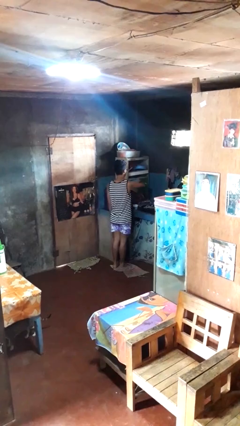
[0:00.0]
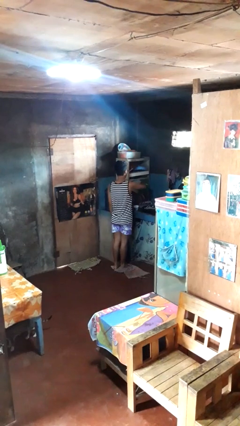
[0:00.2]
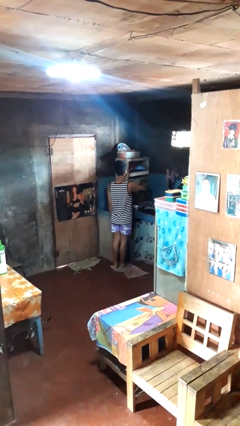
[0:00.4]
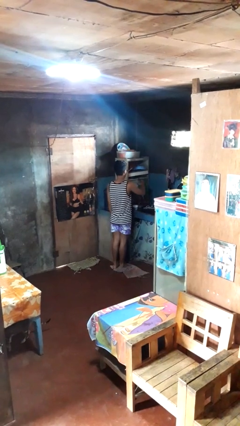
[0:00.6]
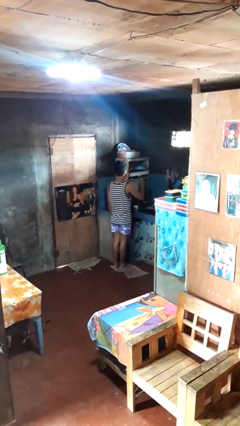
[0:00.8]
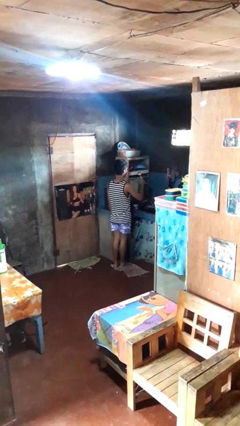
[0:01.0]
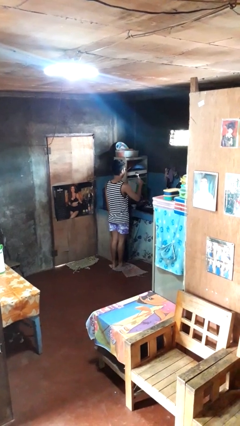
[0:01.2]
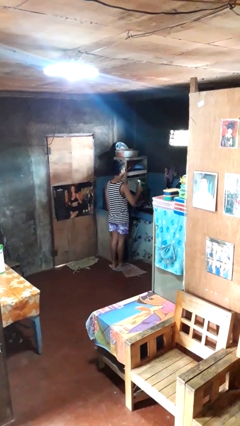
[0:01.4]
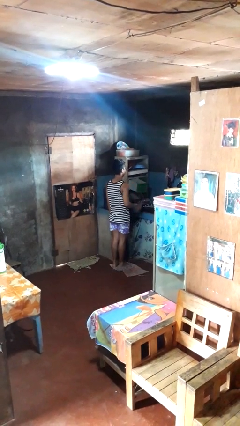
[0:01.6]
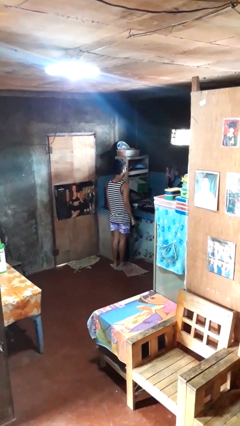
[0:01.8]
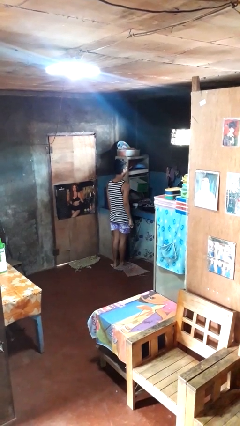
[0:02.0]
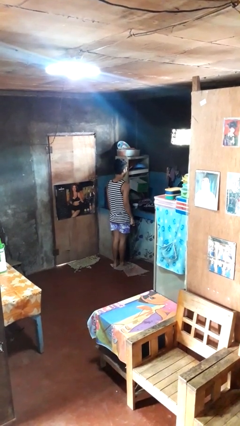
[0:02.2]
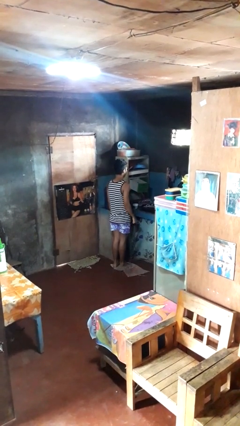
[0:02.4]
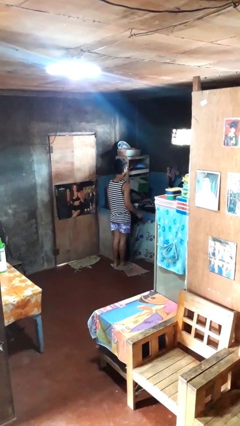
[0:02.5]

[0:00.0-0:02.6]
person takes object from kitchen drawer

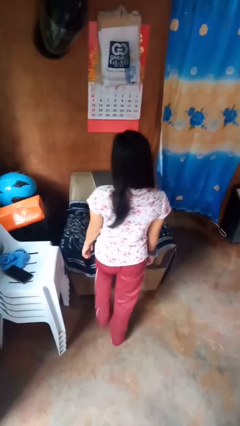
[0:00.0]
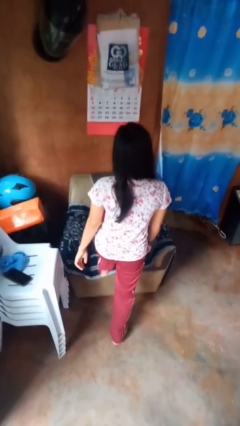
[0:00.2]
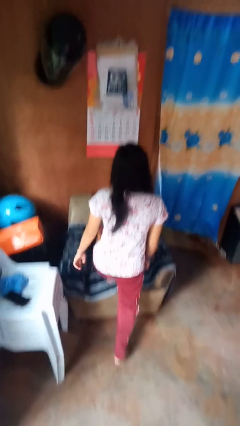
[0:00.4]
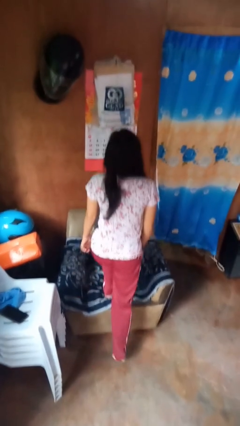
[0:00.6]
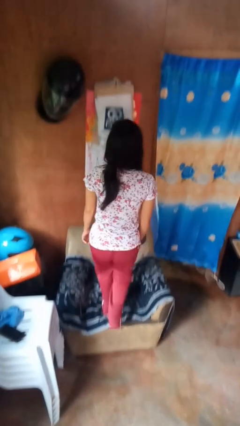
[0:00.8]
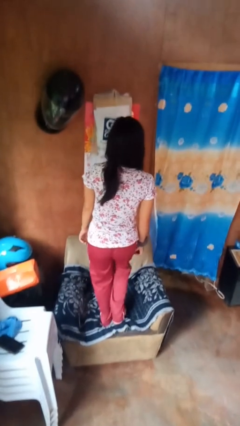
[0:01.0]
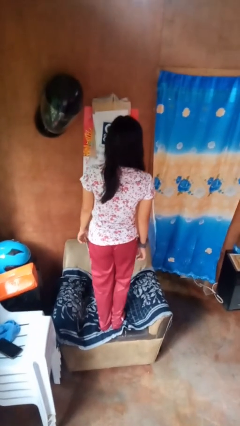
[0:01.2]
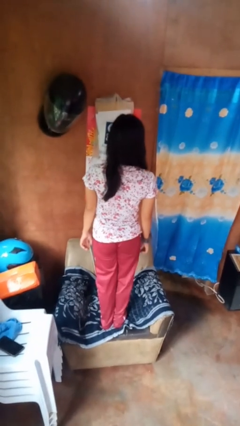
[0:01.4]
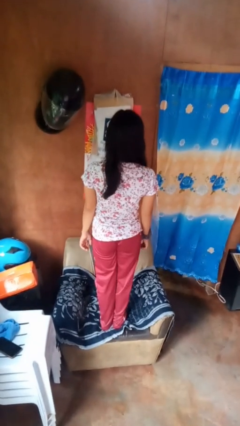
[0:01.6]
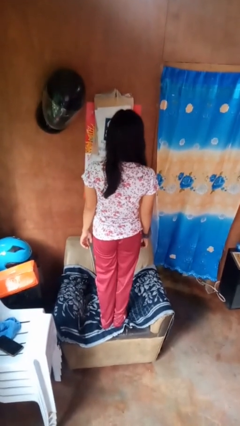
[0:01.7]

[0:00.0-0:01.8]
person climbs on couch

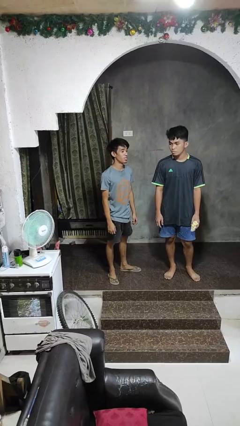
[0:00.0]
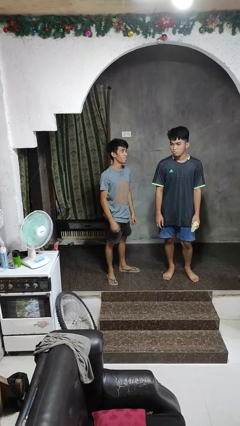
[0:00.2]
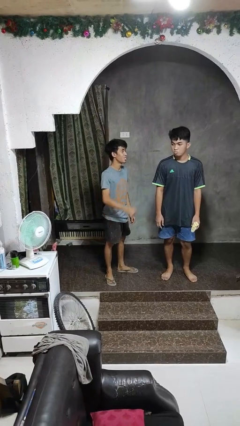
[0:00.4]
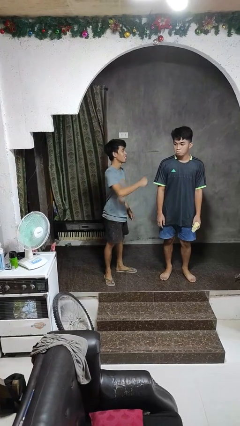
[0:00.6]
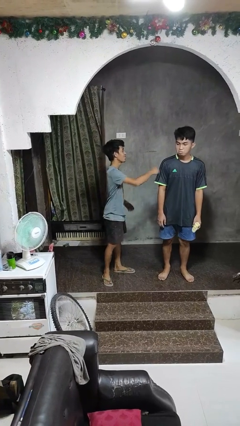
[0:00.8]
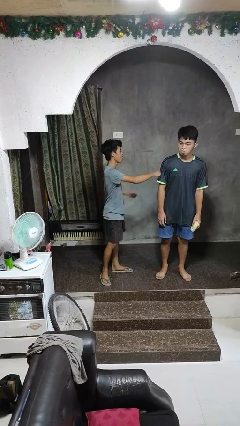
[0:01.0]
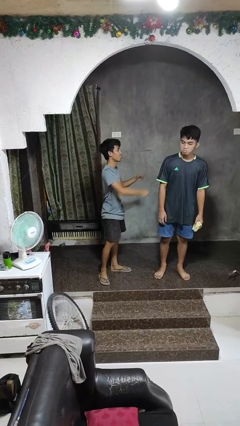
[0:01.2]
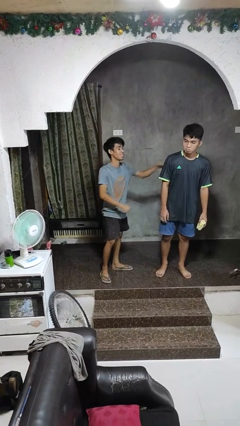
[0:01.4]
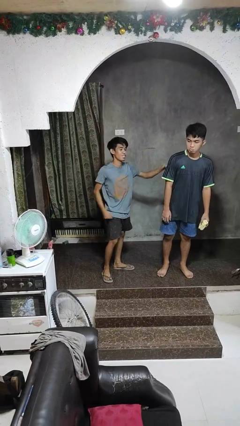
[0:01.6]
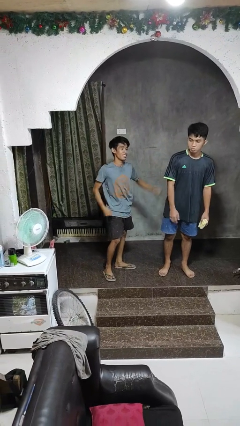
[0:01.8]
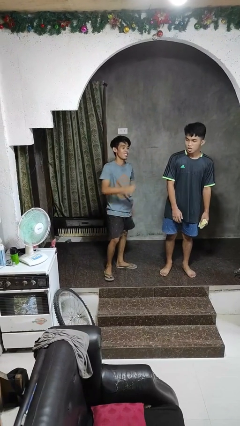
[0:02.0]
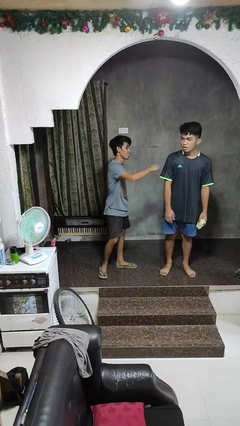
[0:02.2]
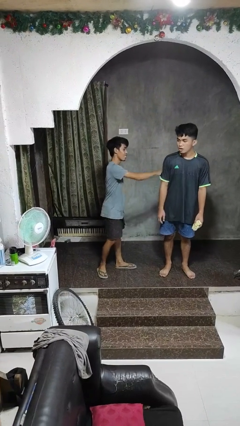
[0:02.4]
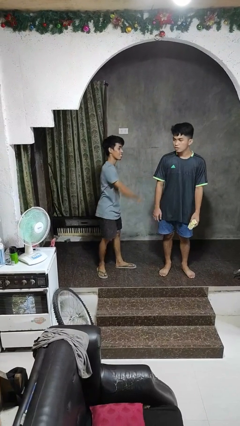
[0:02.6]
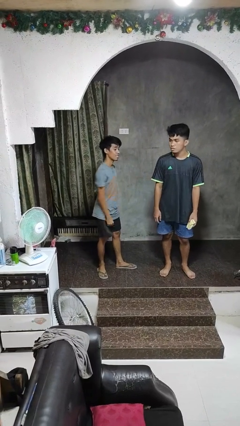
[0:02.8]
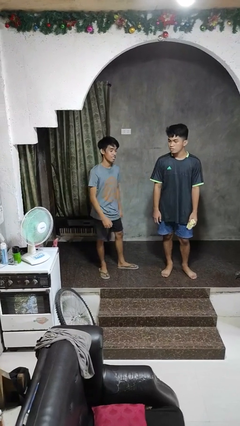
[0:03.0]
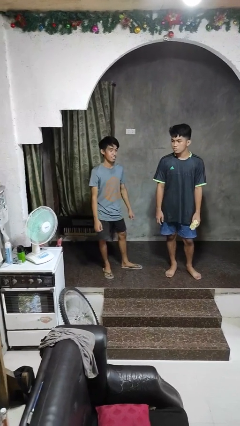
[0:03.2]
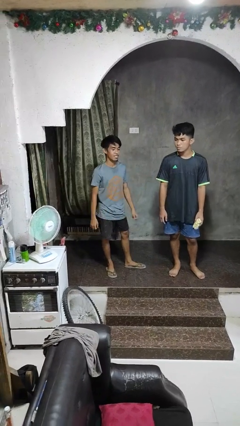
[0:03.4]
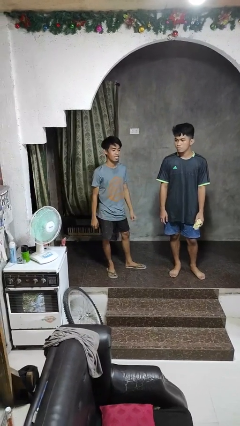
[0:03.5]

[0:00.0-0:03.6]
person pounds shoulders of person

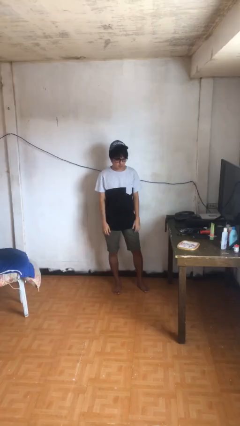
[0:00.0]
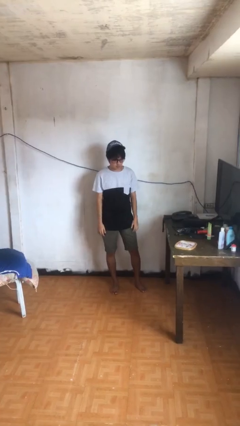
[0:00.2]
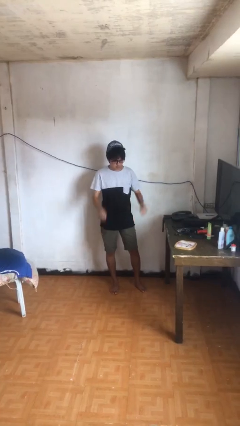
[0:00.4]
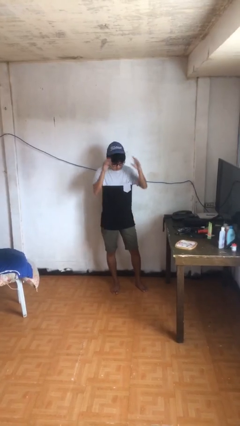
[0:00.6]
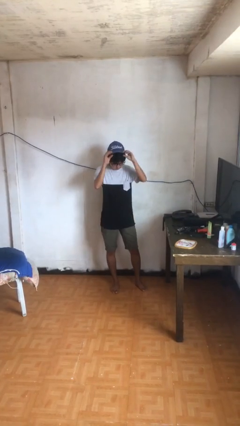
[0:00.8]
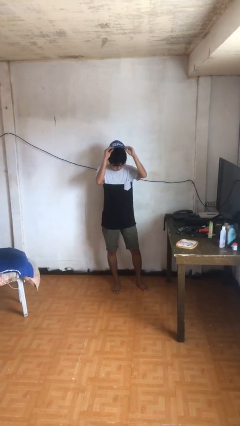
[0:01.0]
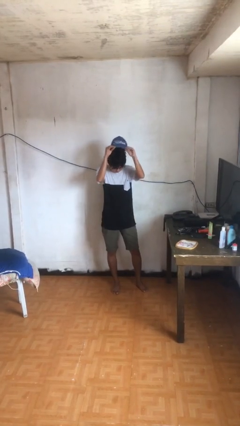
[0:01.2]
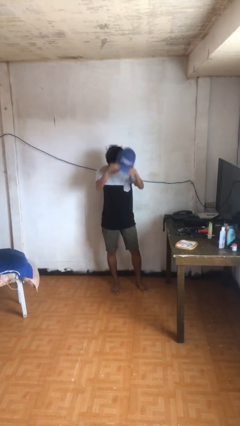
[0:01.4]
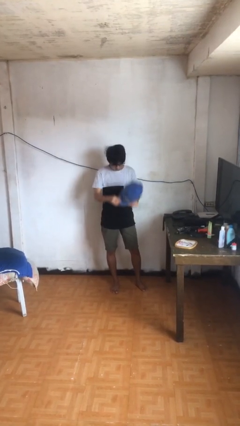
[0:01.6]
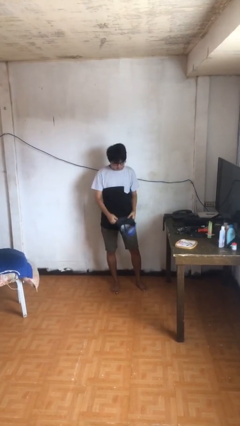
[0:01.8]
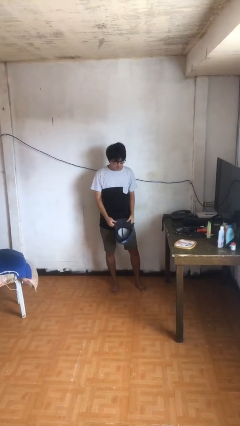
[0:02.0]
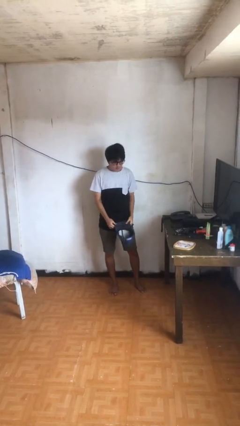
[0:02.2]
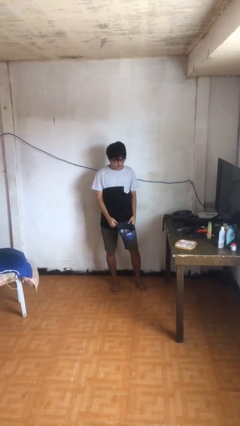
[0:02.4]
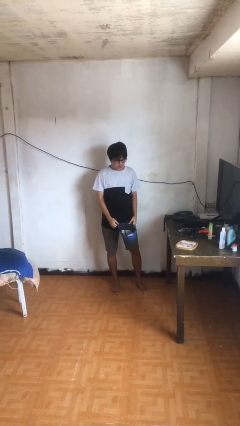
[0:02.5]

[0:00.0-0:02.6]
person takes off hat

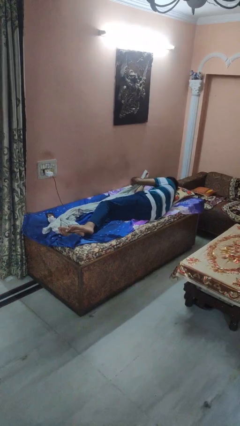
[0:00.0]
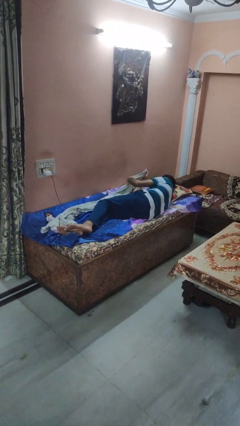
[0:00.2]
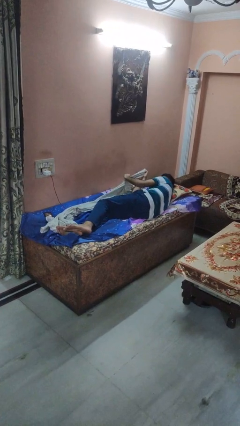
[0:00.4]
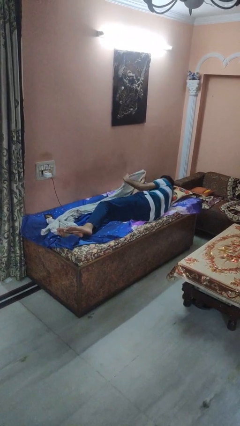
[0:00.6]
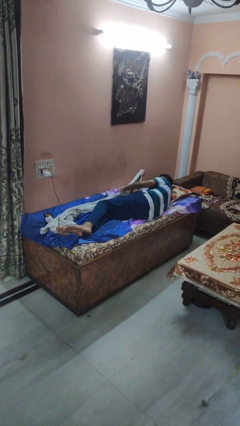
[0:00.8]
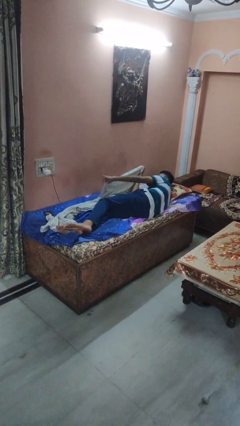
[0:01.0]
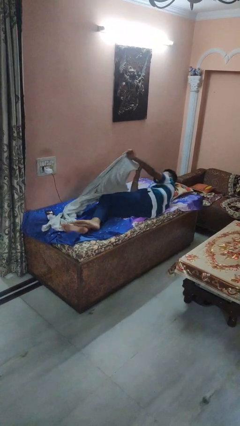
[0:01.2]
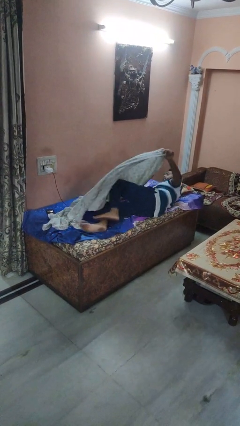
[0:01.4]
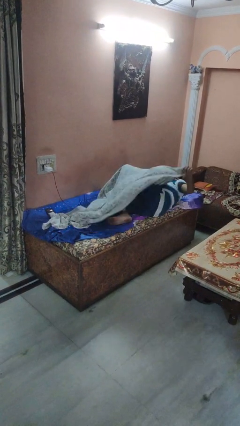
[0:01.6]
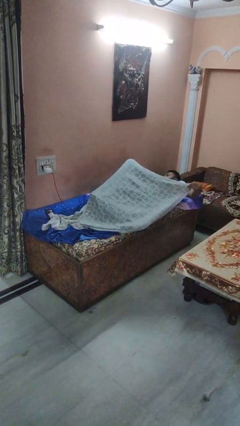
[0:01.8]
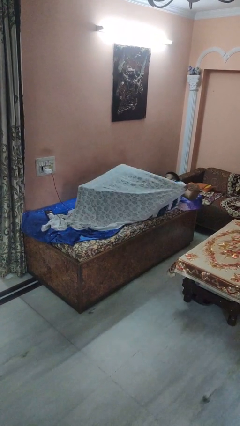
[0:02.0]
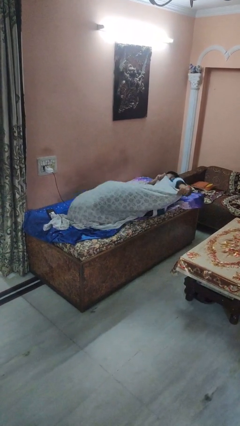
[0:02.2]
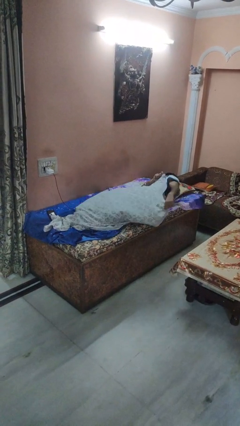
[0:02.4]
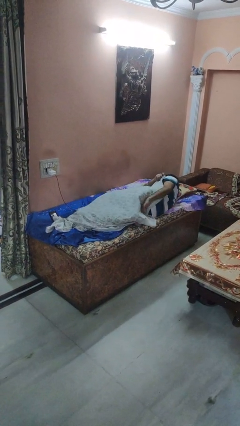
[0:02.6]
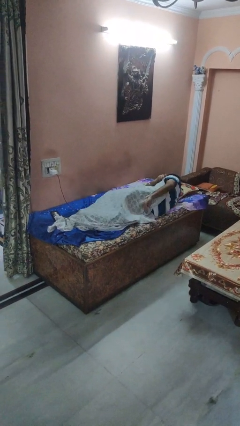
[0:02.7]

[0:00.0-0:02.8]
person covers with bedsheets

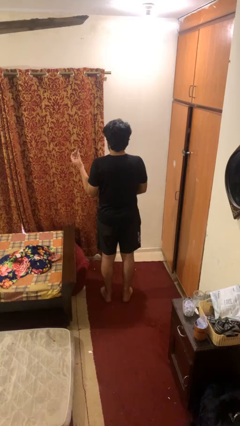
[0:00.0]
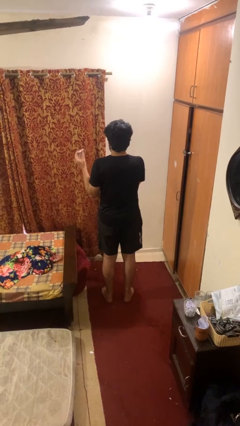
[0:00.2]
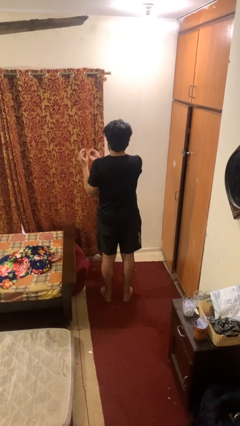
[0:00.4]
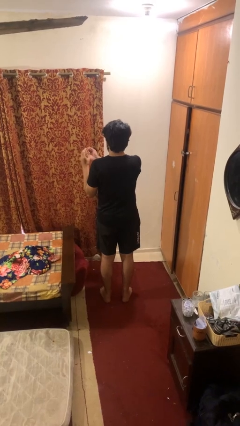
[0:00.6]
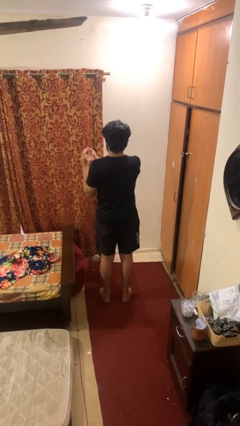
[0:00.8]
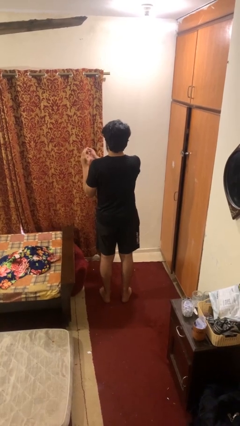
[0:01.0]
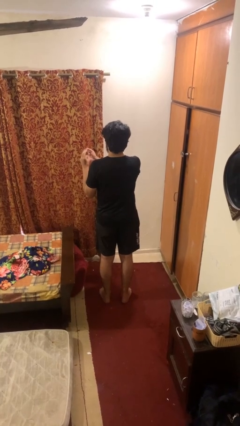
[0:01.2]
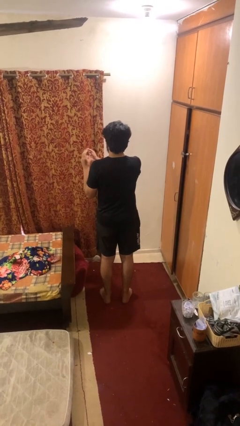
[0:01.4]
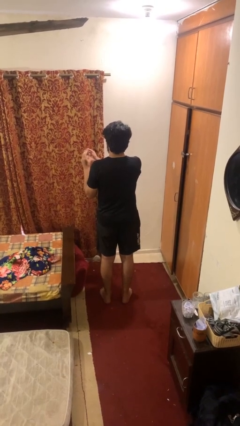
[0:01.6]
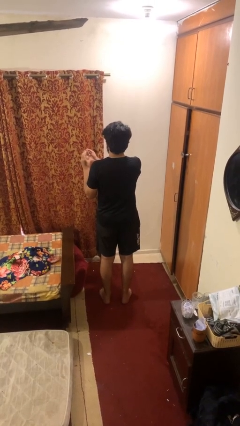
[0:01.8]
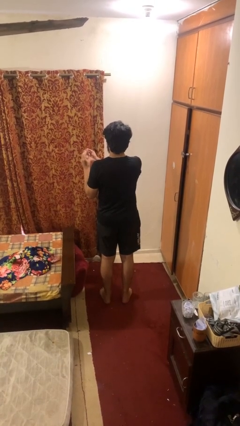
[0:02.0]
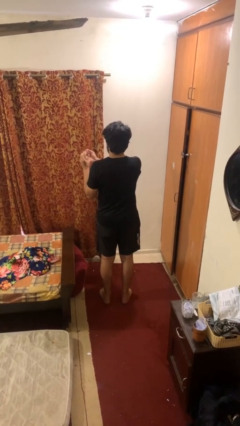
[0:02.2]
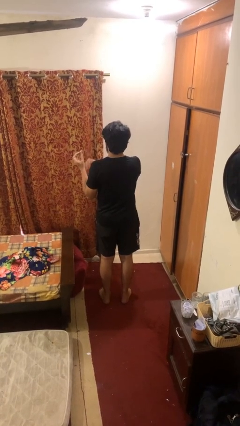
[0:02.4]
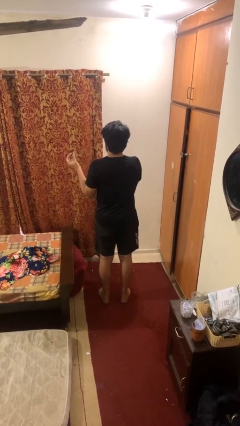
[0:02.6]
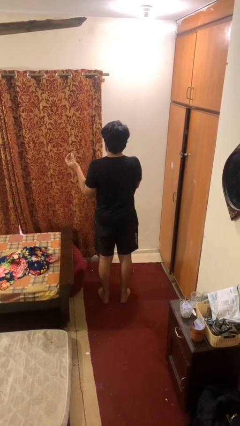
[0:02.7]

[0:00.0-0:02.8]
person clips fingernails

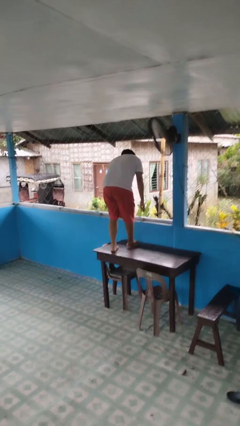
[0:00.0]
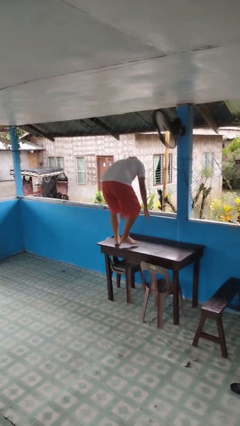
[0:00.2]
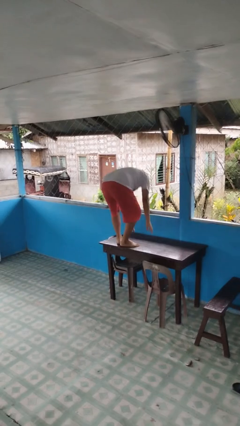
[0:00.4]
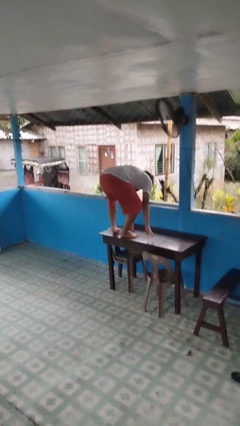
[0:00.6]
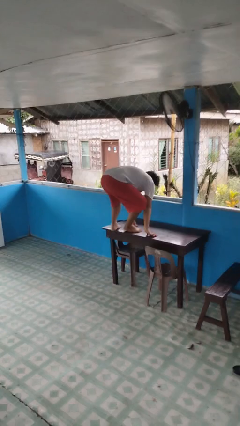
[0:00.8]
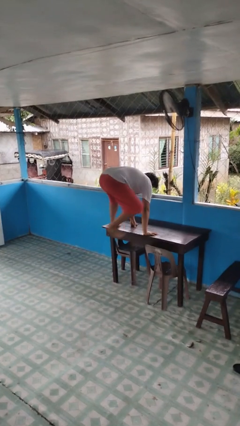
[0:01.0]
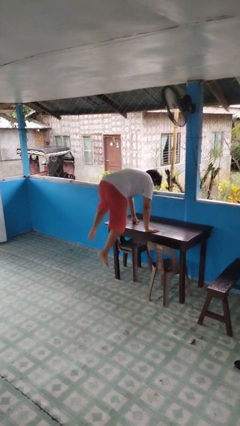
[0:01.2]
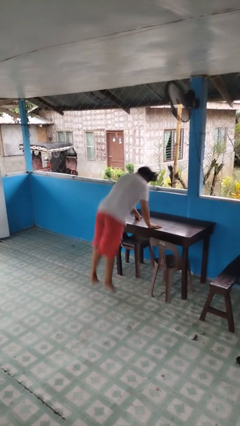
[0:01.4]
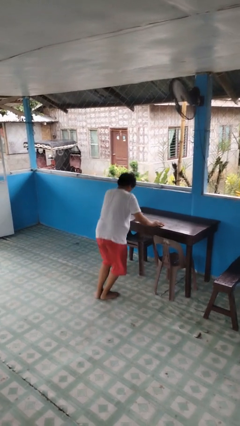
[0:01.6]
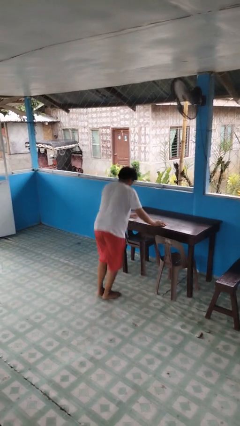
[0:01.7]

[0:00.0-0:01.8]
person climbs off table
